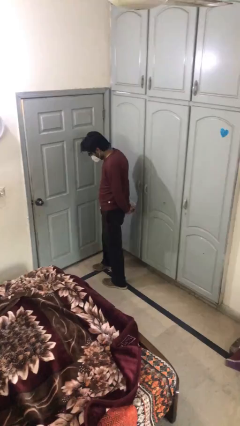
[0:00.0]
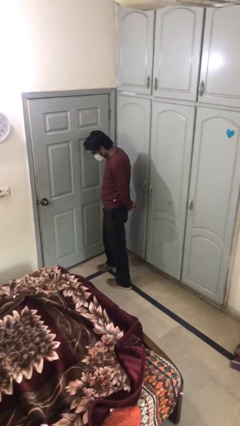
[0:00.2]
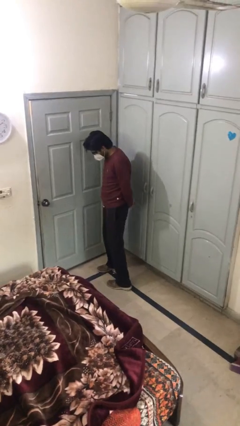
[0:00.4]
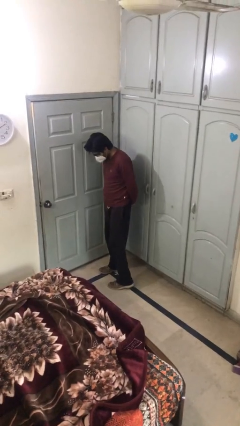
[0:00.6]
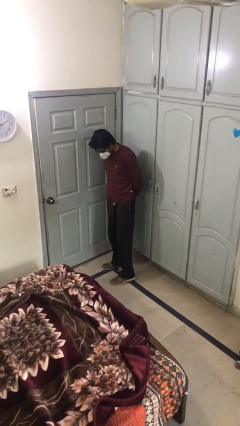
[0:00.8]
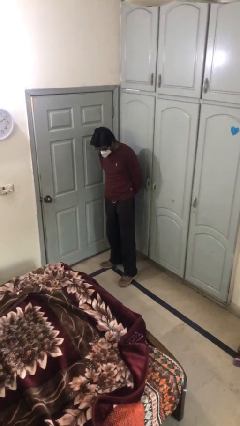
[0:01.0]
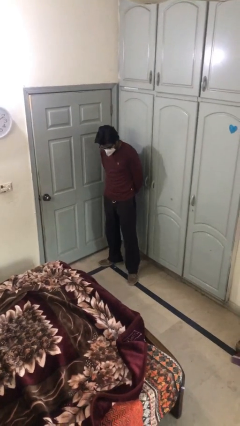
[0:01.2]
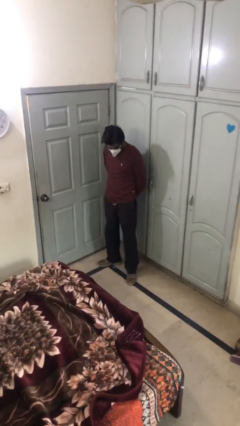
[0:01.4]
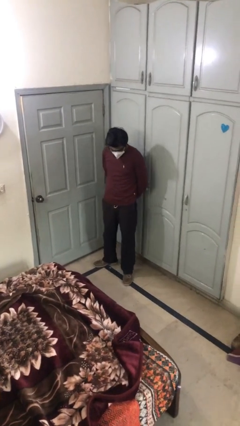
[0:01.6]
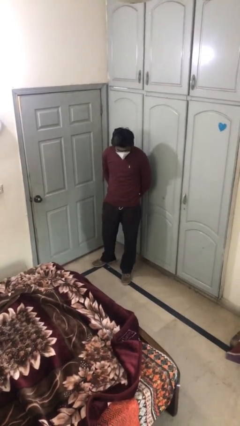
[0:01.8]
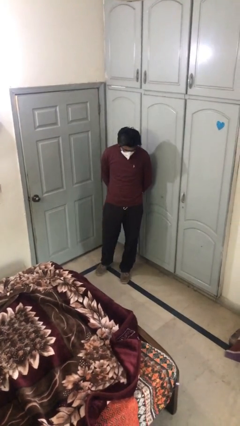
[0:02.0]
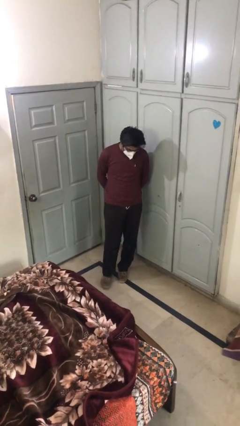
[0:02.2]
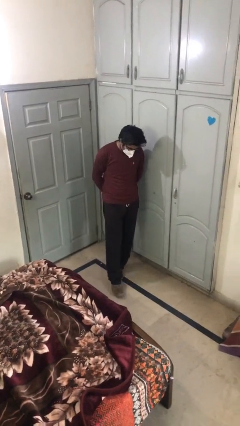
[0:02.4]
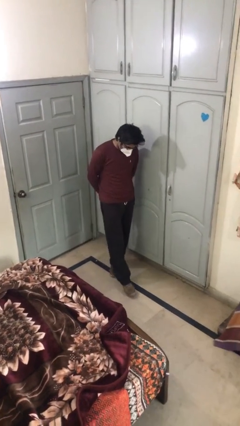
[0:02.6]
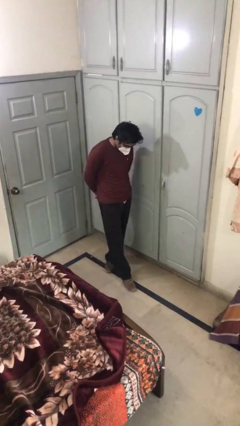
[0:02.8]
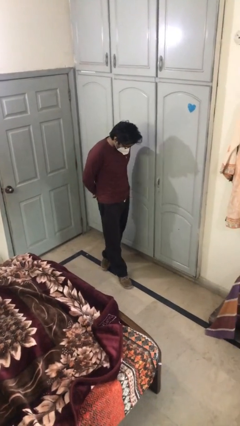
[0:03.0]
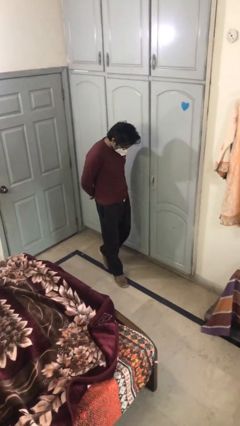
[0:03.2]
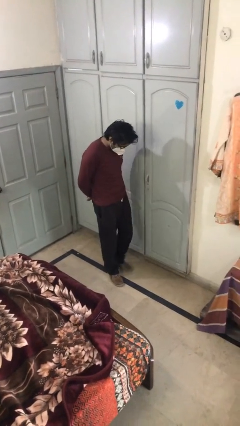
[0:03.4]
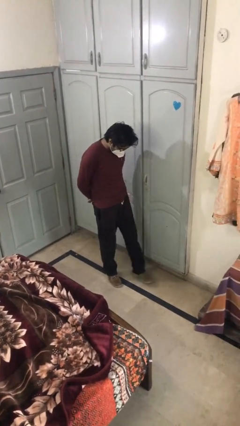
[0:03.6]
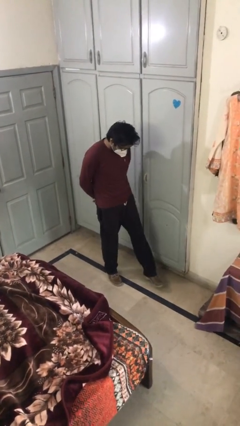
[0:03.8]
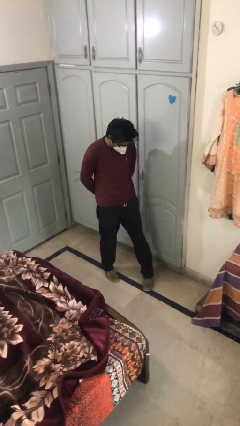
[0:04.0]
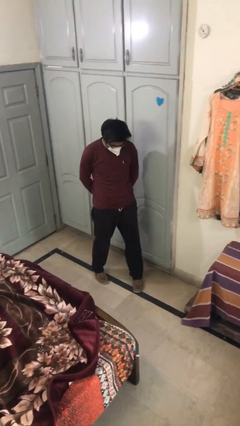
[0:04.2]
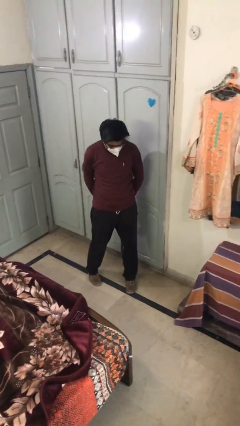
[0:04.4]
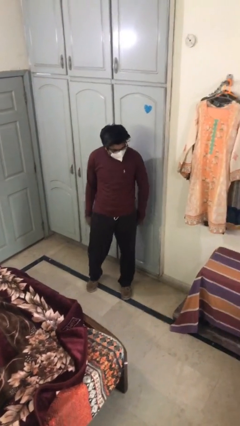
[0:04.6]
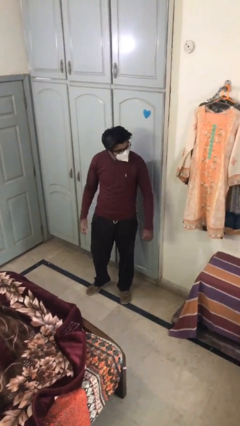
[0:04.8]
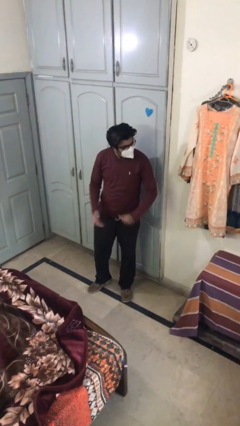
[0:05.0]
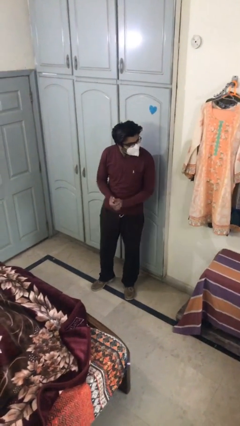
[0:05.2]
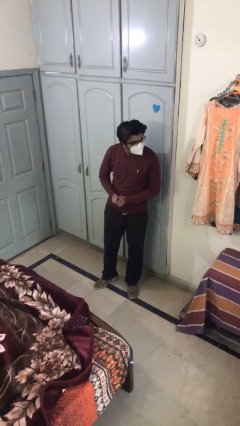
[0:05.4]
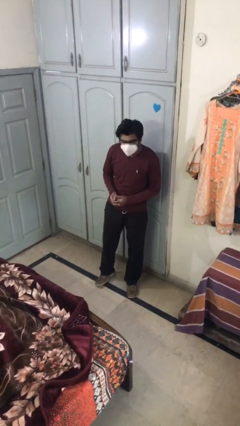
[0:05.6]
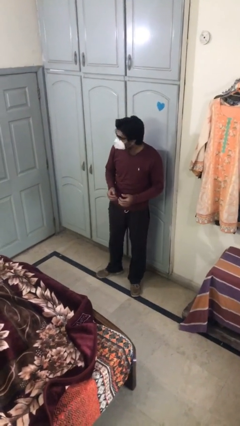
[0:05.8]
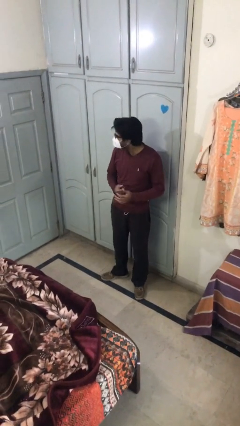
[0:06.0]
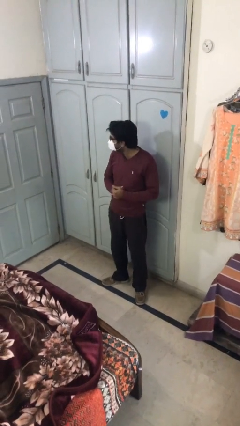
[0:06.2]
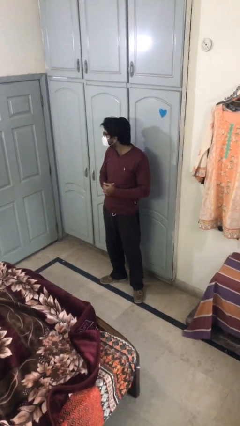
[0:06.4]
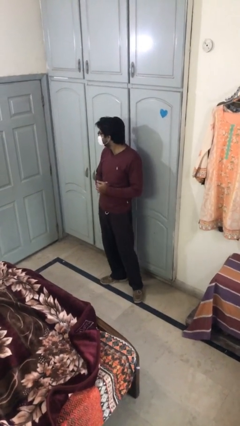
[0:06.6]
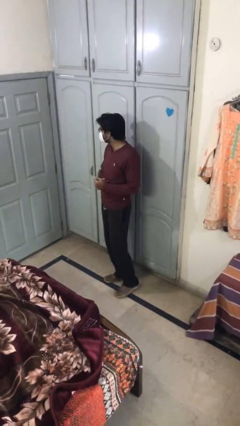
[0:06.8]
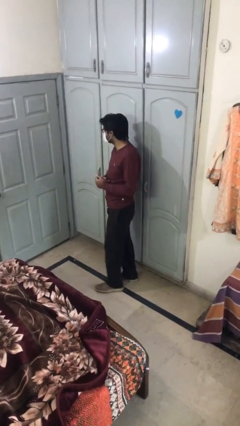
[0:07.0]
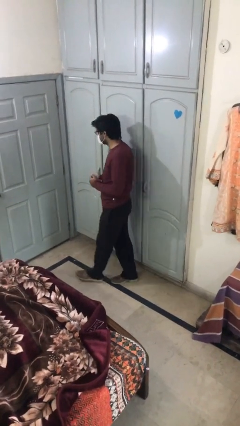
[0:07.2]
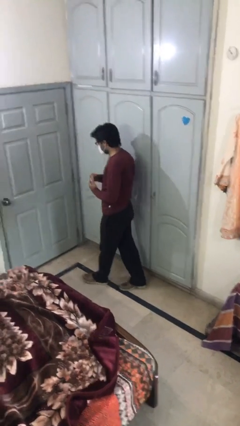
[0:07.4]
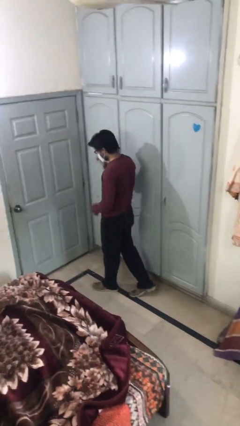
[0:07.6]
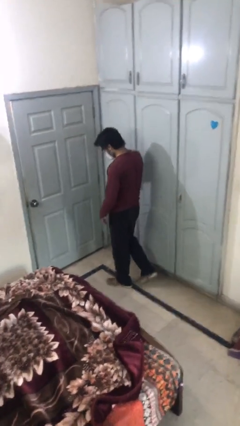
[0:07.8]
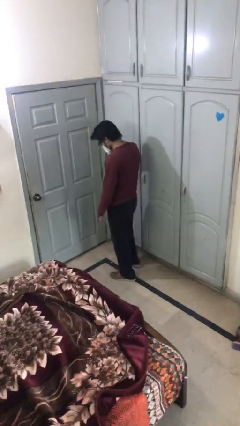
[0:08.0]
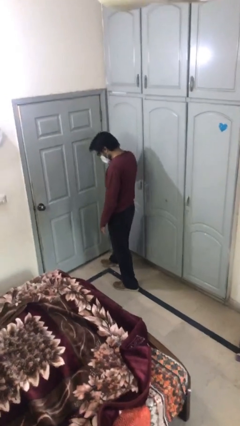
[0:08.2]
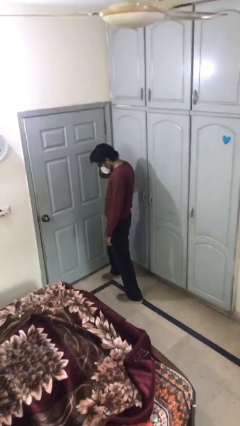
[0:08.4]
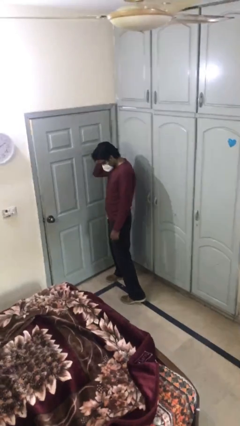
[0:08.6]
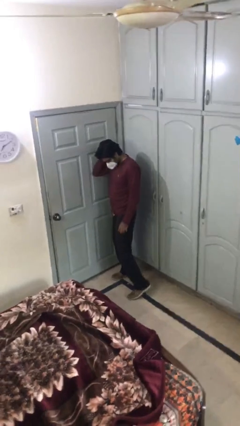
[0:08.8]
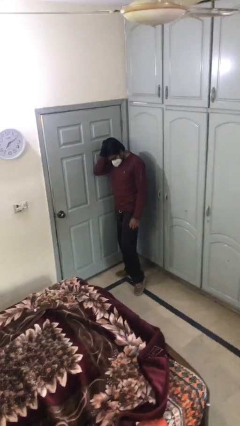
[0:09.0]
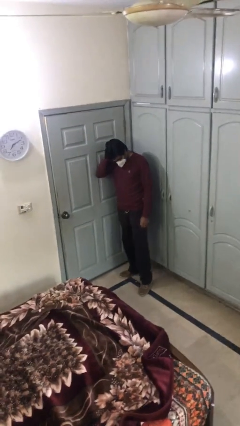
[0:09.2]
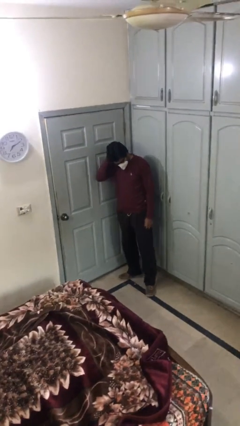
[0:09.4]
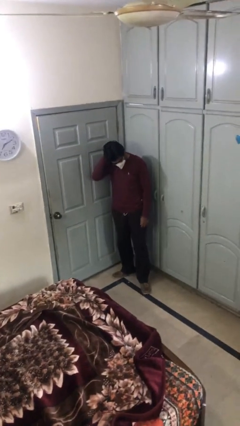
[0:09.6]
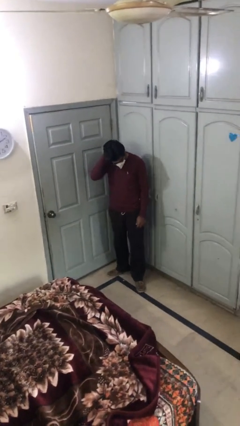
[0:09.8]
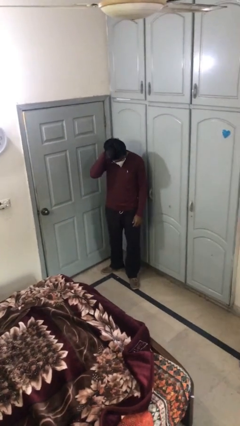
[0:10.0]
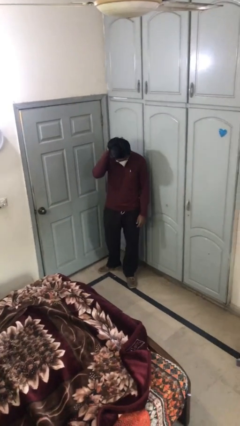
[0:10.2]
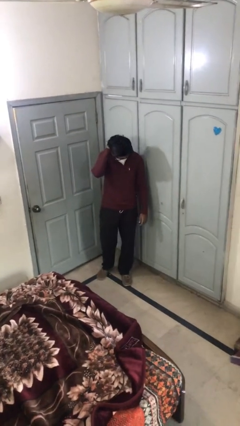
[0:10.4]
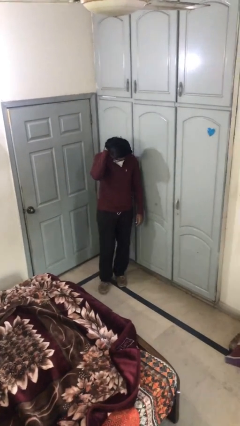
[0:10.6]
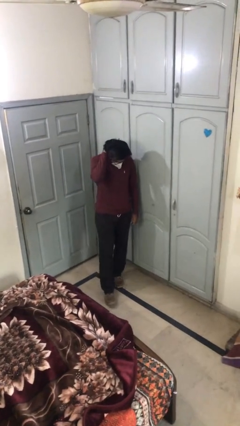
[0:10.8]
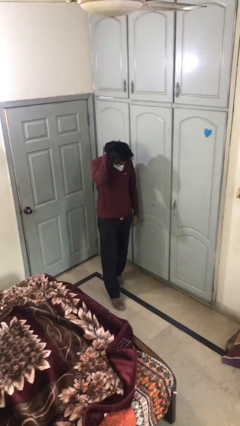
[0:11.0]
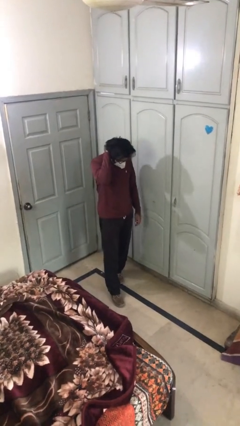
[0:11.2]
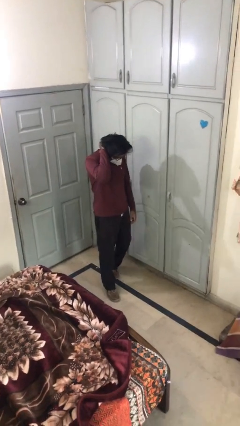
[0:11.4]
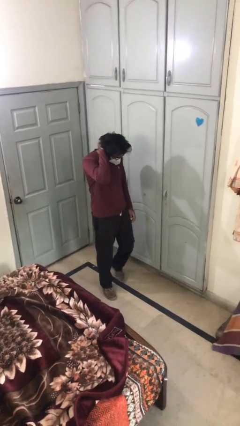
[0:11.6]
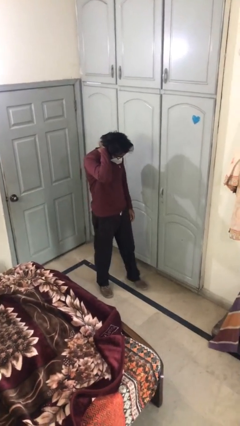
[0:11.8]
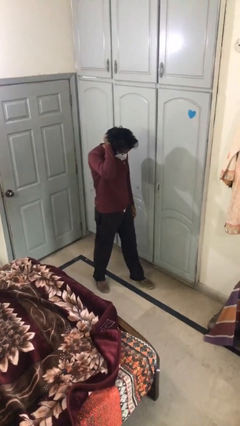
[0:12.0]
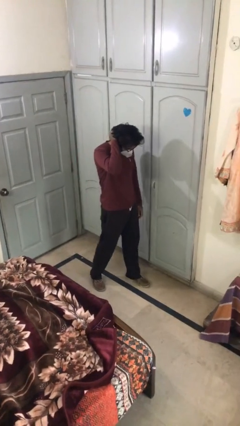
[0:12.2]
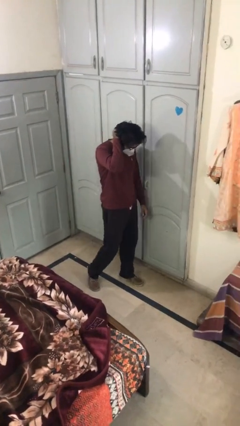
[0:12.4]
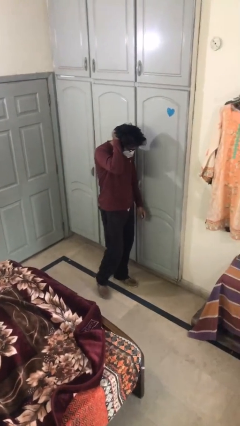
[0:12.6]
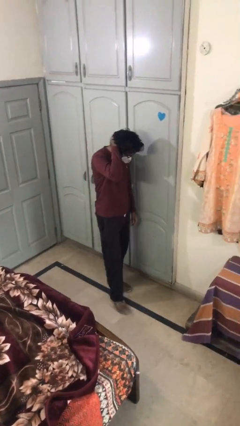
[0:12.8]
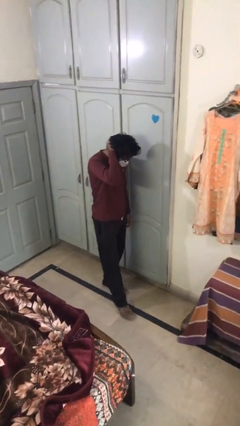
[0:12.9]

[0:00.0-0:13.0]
person walks

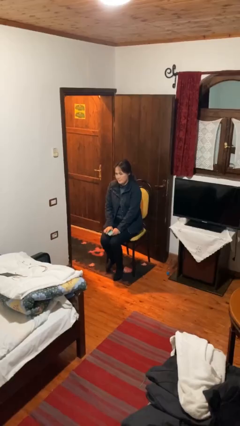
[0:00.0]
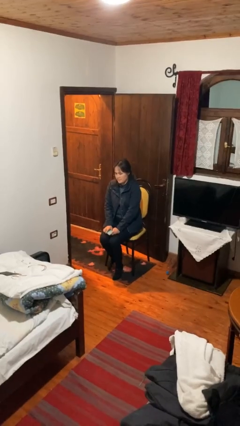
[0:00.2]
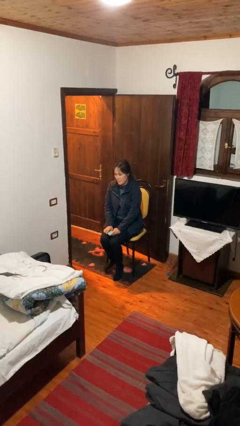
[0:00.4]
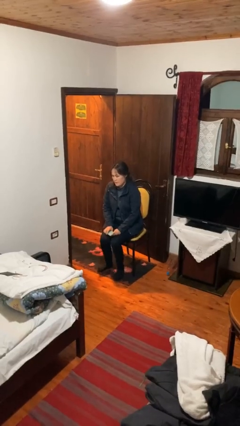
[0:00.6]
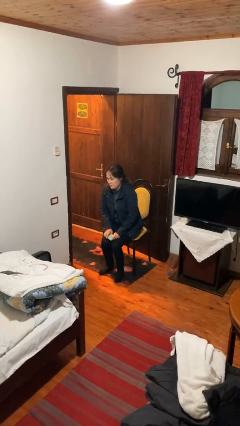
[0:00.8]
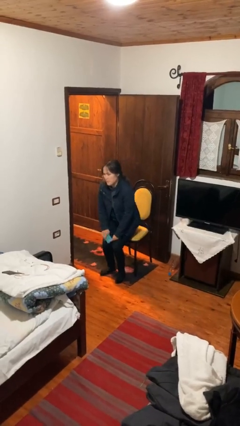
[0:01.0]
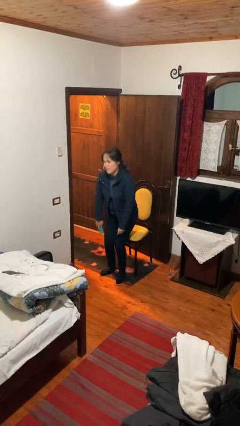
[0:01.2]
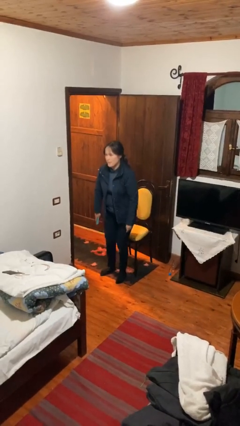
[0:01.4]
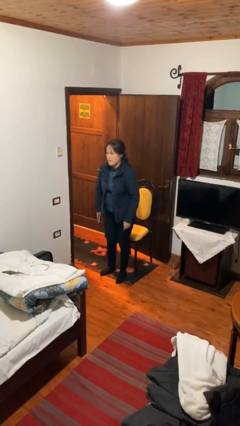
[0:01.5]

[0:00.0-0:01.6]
person stands up

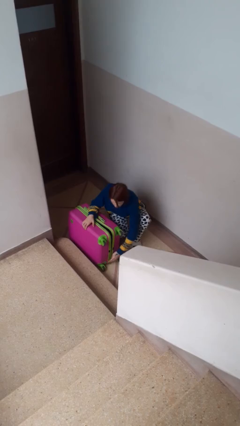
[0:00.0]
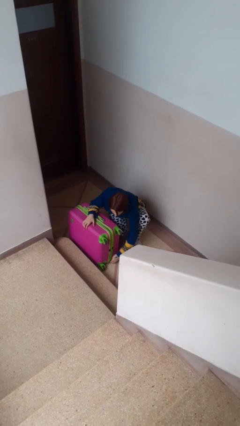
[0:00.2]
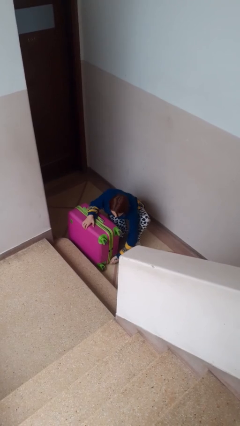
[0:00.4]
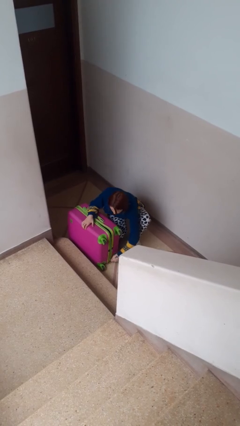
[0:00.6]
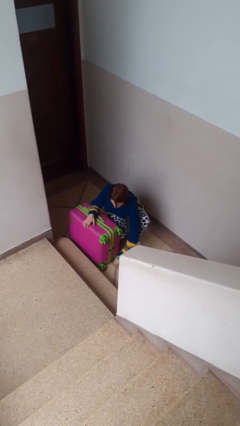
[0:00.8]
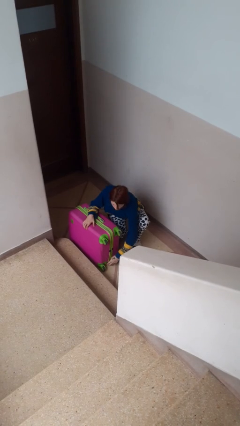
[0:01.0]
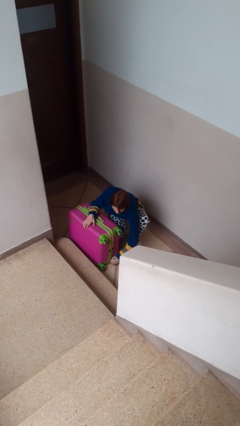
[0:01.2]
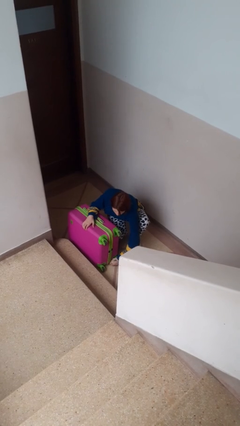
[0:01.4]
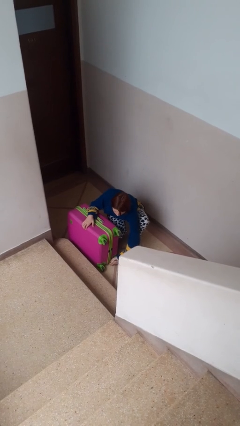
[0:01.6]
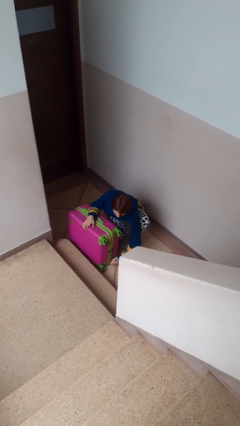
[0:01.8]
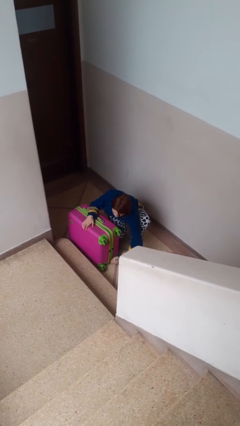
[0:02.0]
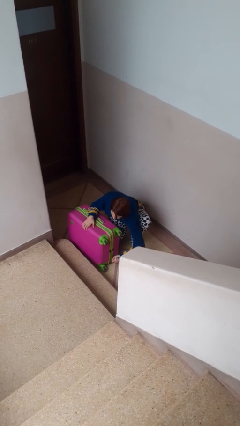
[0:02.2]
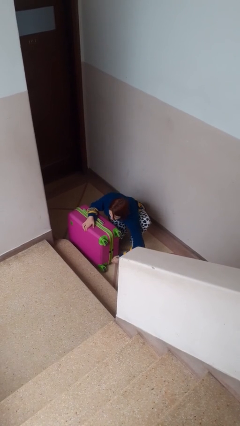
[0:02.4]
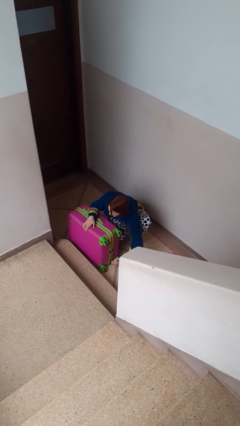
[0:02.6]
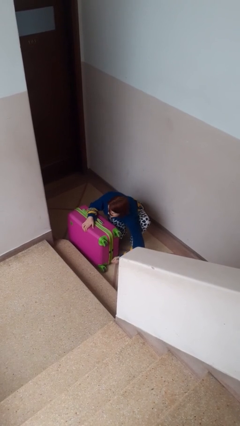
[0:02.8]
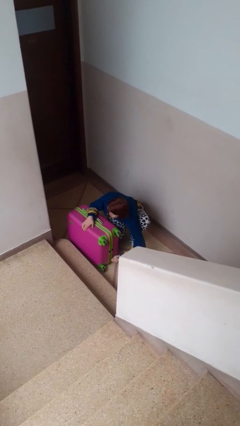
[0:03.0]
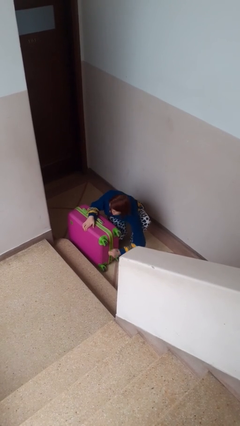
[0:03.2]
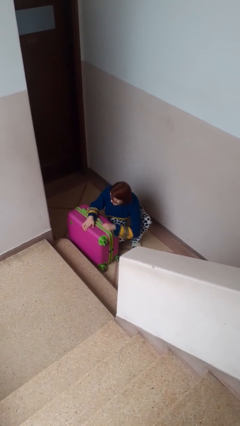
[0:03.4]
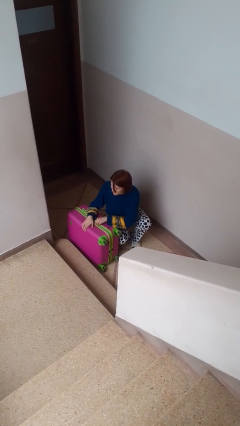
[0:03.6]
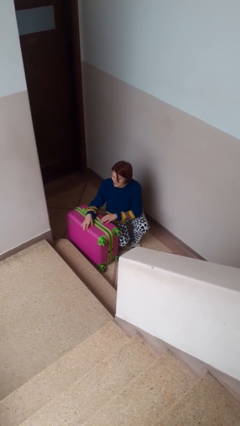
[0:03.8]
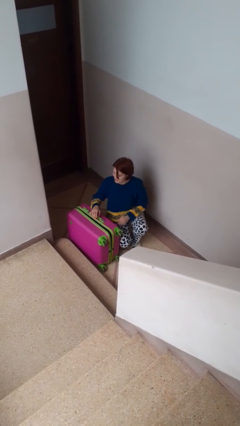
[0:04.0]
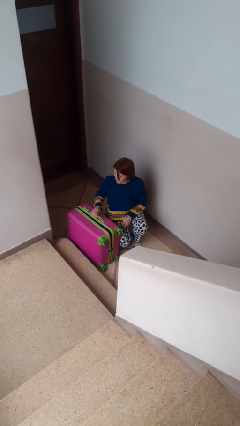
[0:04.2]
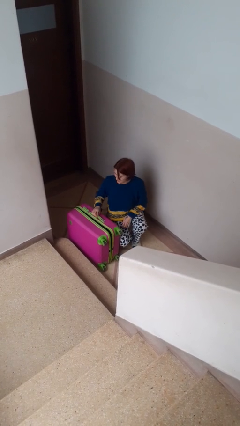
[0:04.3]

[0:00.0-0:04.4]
person closes suitcase
